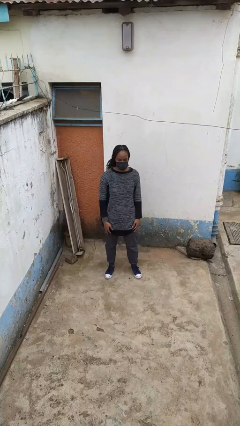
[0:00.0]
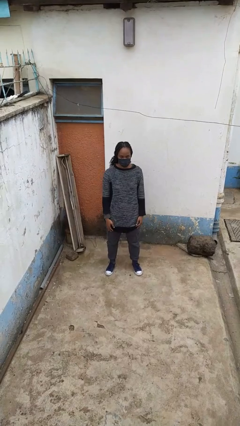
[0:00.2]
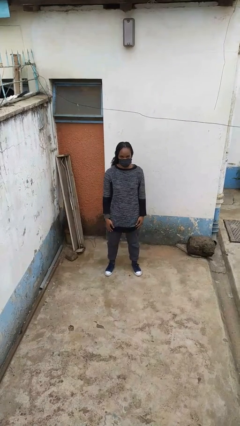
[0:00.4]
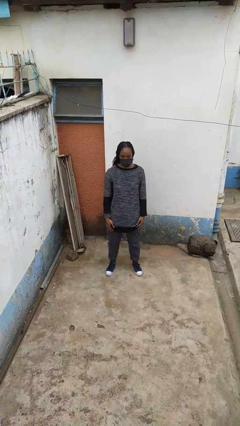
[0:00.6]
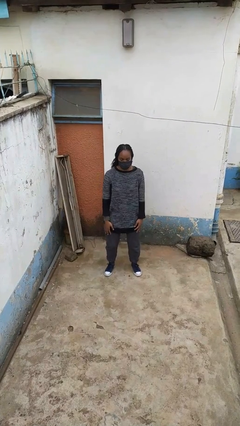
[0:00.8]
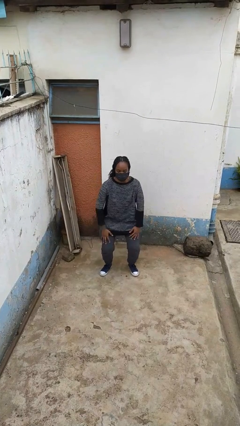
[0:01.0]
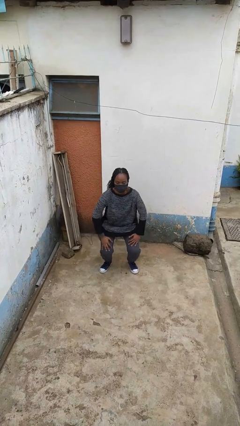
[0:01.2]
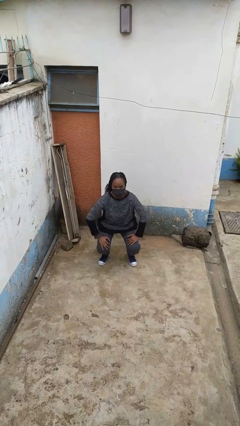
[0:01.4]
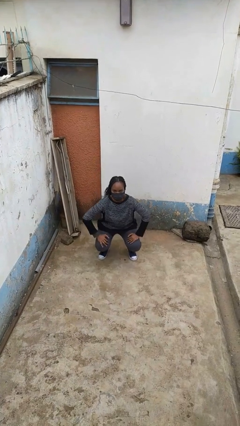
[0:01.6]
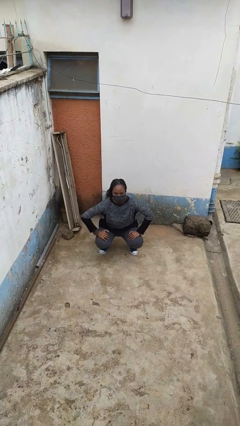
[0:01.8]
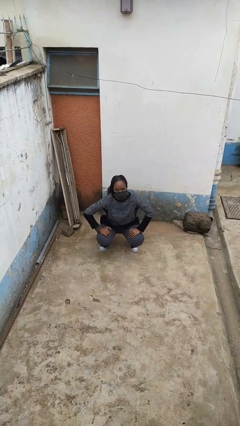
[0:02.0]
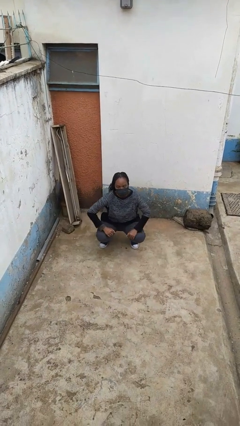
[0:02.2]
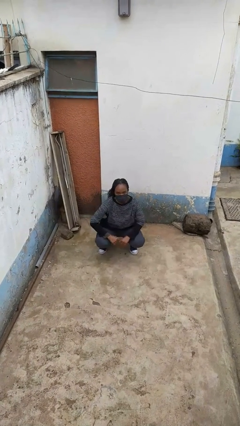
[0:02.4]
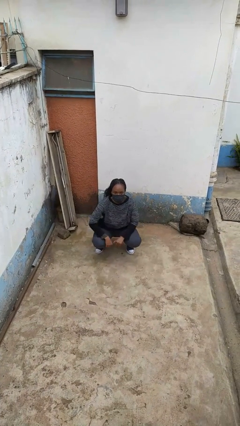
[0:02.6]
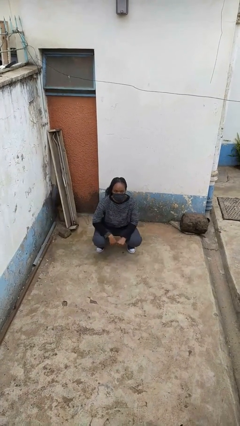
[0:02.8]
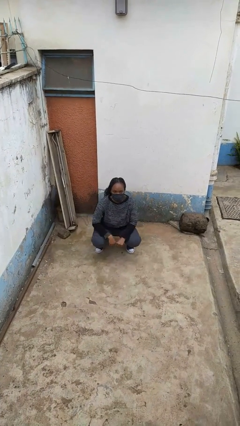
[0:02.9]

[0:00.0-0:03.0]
person squats

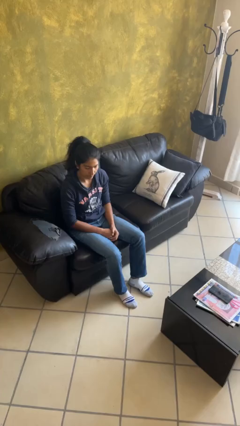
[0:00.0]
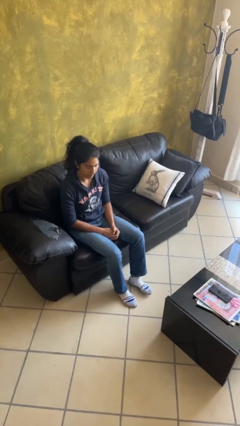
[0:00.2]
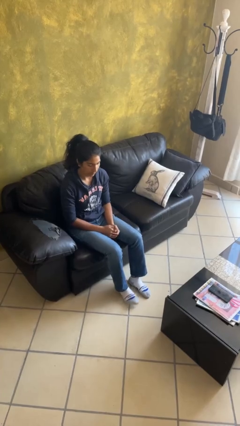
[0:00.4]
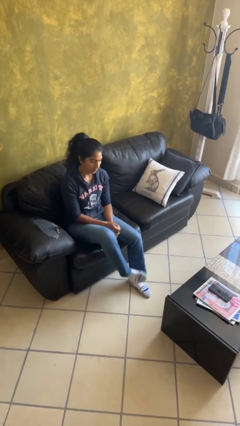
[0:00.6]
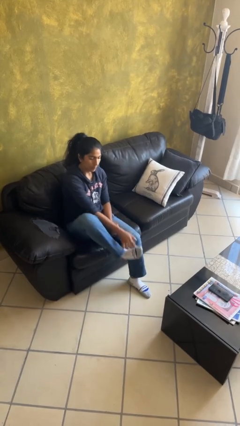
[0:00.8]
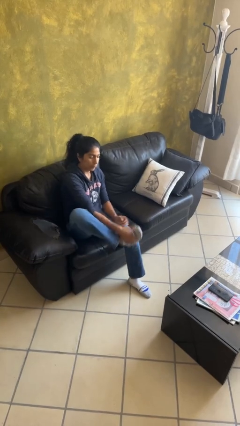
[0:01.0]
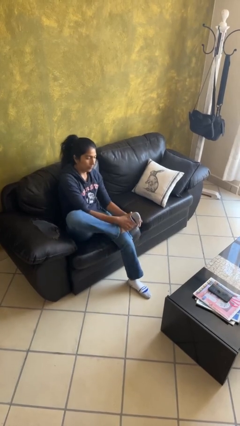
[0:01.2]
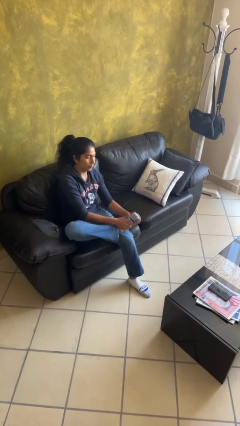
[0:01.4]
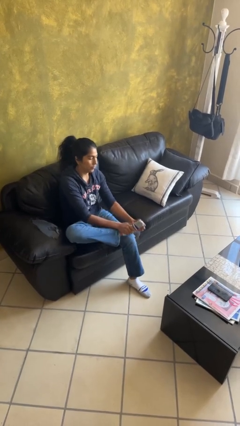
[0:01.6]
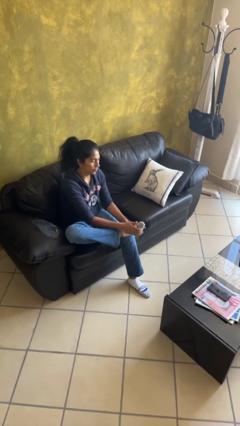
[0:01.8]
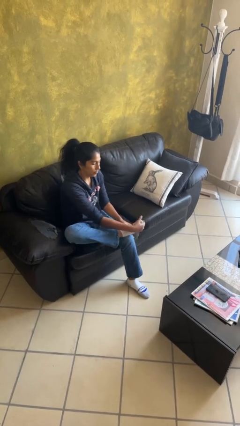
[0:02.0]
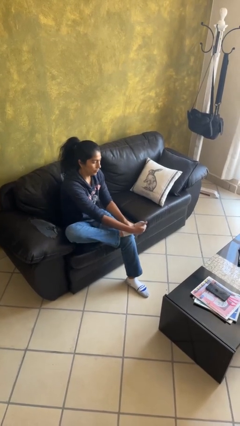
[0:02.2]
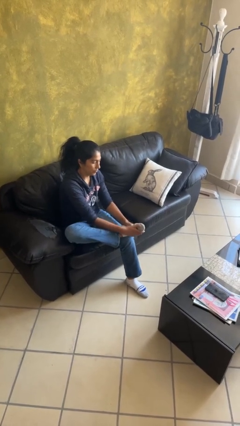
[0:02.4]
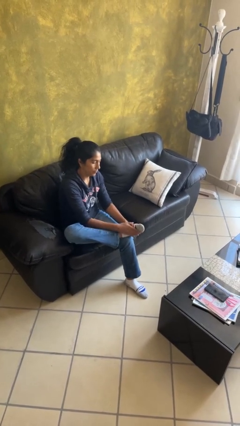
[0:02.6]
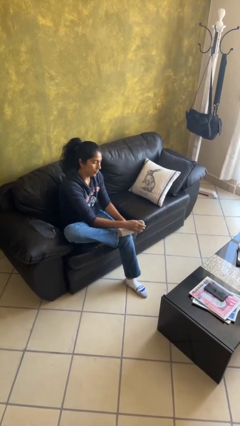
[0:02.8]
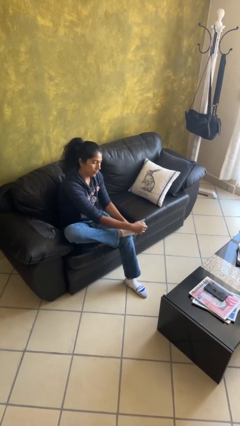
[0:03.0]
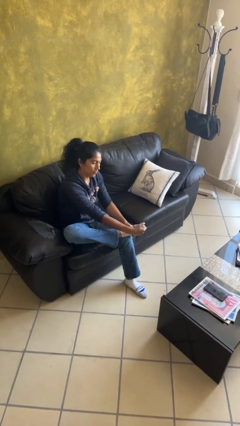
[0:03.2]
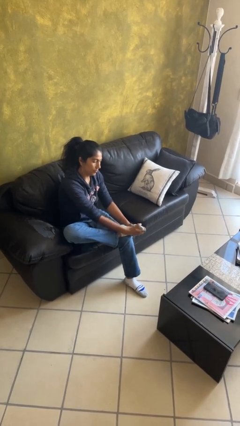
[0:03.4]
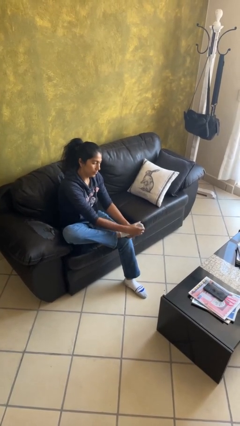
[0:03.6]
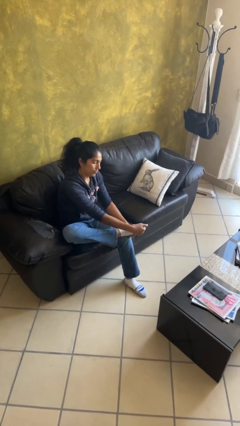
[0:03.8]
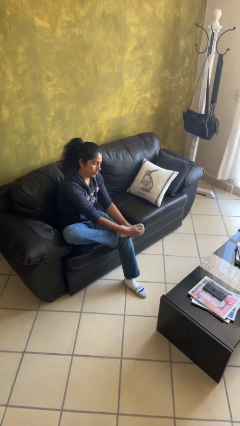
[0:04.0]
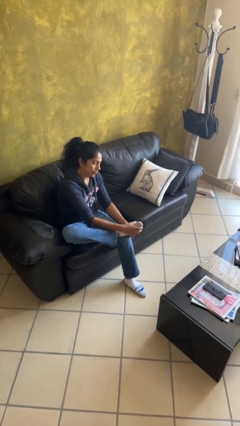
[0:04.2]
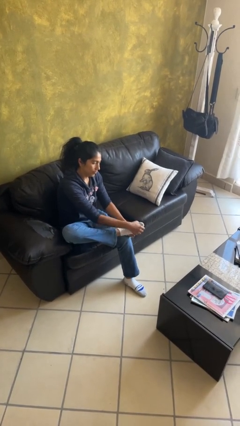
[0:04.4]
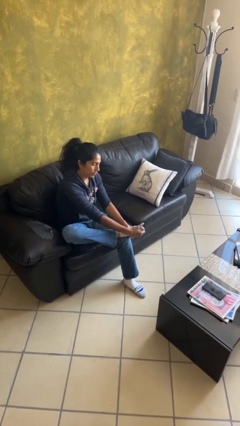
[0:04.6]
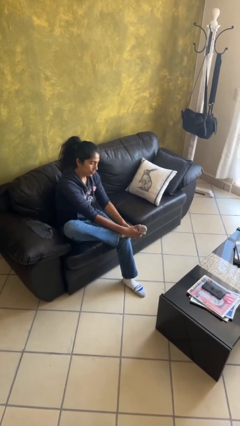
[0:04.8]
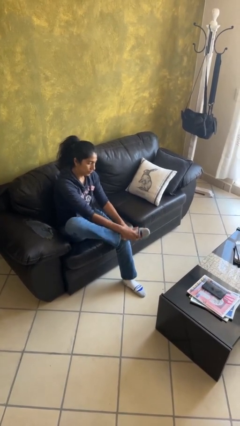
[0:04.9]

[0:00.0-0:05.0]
person rubs foot

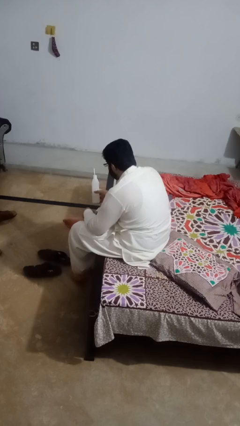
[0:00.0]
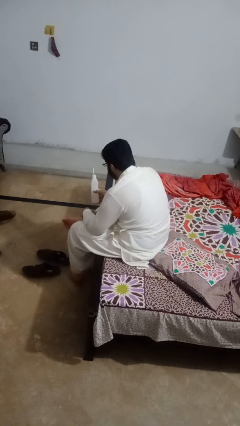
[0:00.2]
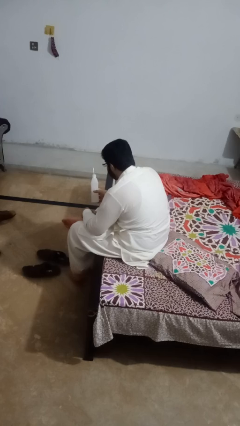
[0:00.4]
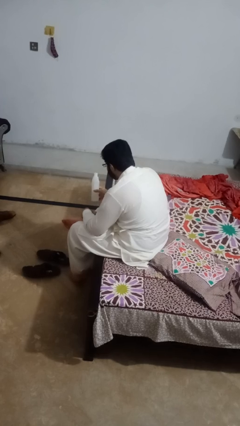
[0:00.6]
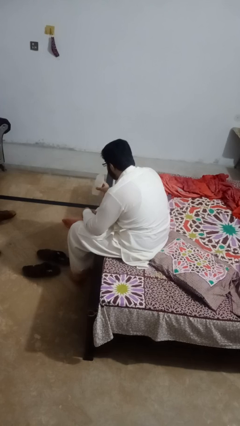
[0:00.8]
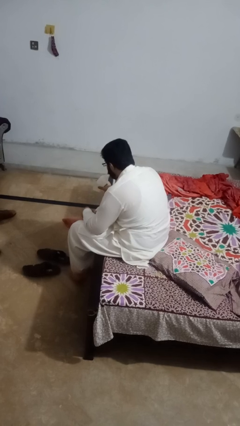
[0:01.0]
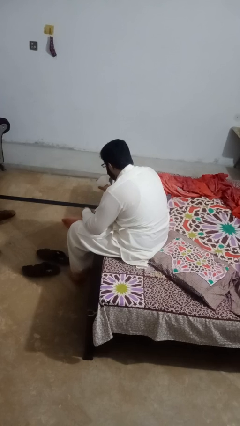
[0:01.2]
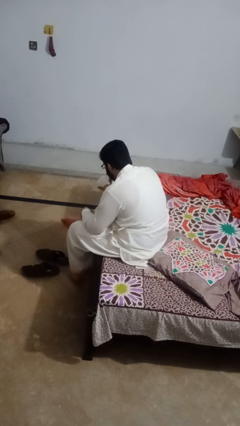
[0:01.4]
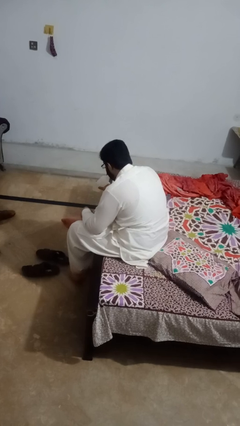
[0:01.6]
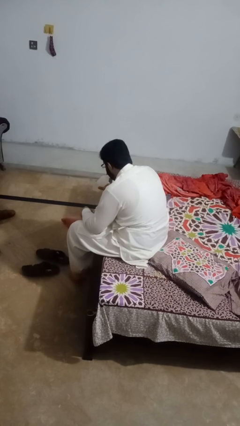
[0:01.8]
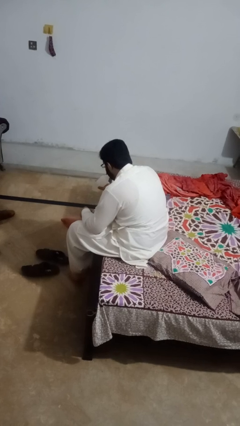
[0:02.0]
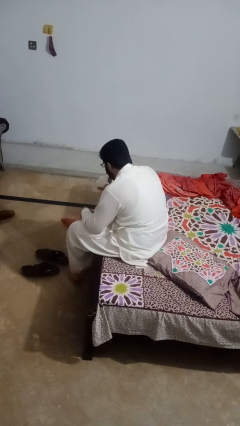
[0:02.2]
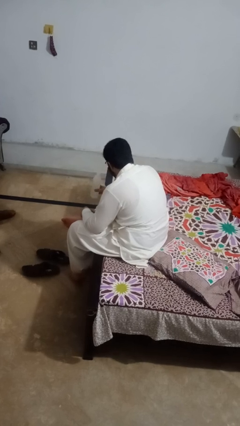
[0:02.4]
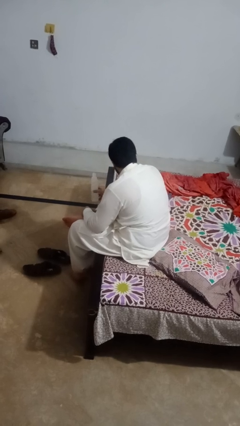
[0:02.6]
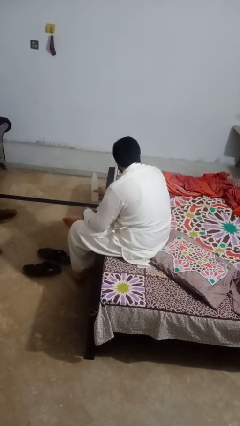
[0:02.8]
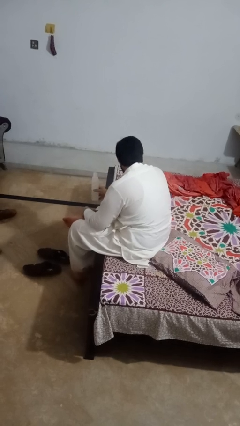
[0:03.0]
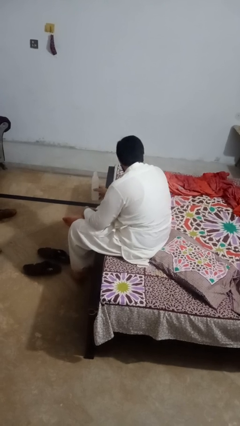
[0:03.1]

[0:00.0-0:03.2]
person drinks from straw

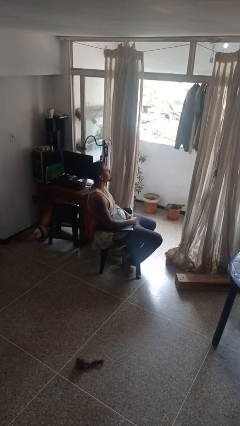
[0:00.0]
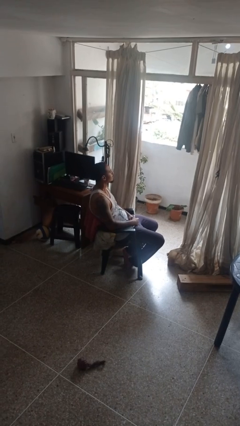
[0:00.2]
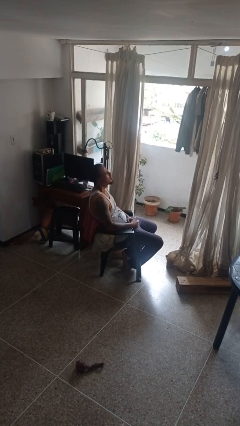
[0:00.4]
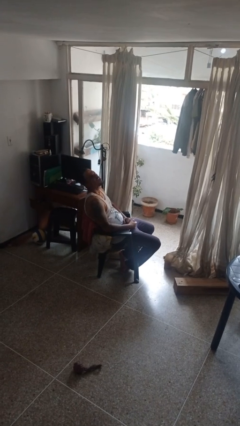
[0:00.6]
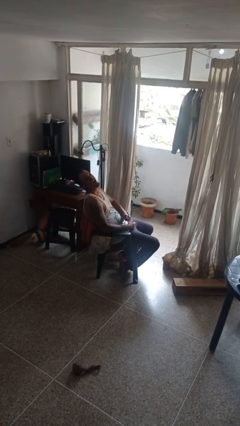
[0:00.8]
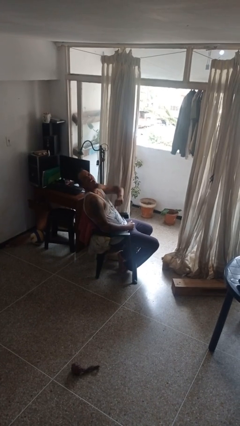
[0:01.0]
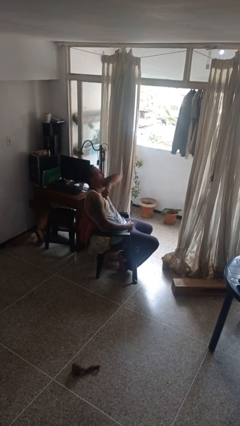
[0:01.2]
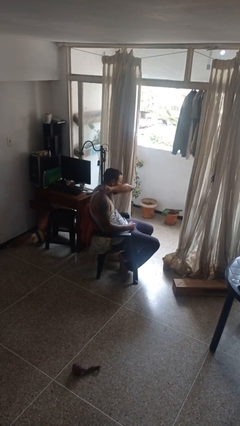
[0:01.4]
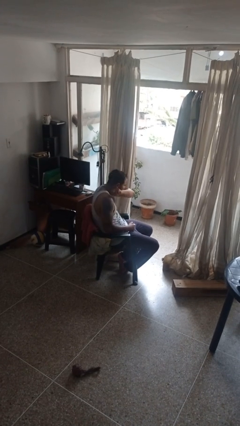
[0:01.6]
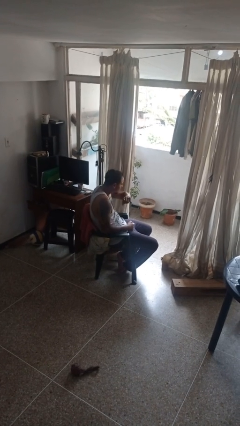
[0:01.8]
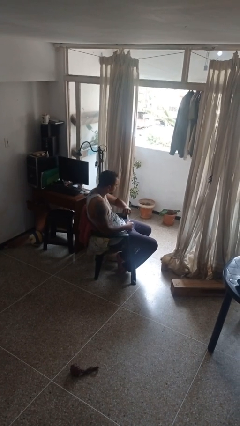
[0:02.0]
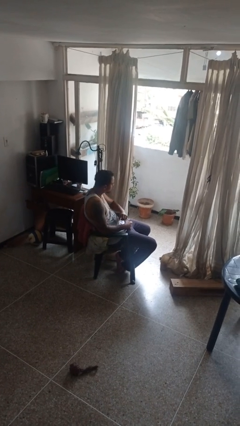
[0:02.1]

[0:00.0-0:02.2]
person sneezes into arm

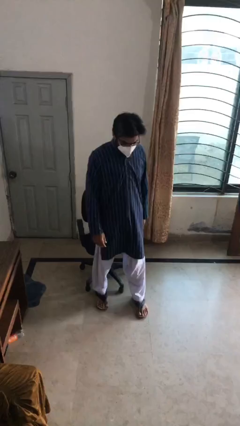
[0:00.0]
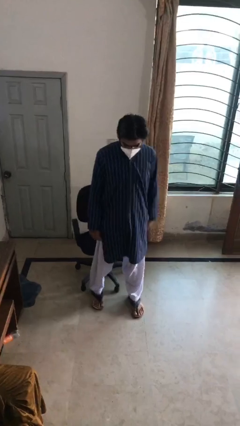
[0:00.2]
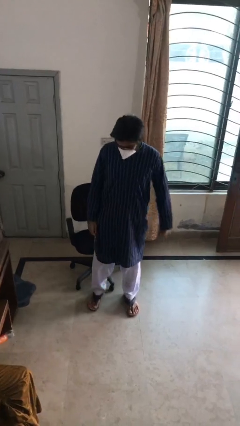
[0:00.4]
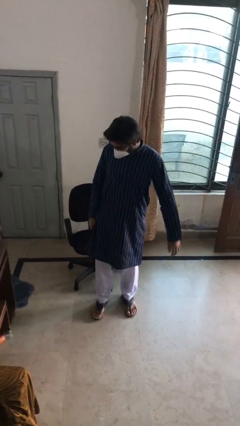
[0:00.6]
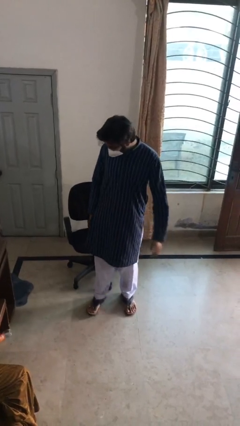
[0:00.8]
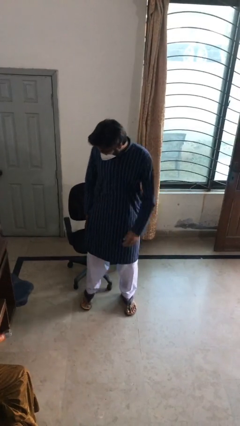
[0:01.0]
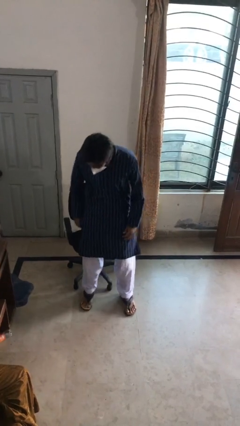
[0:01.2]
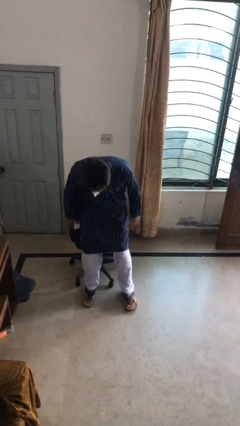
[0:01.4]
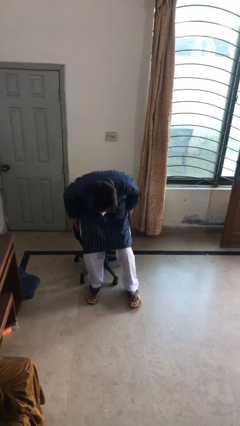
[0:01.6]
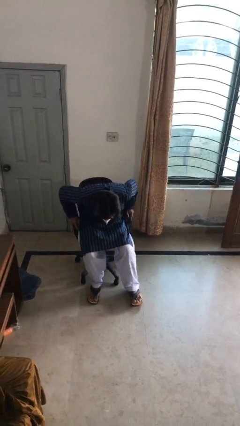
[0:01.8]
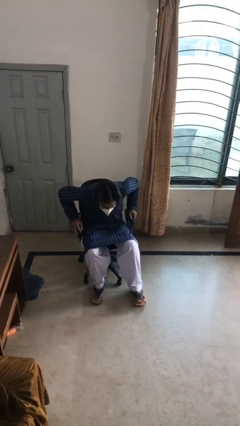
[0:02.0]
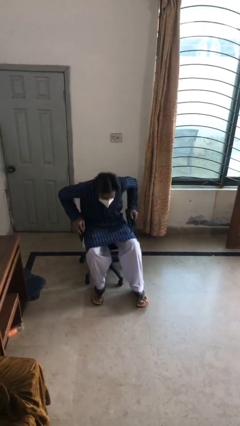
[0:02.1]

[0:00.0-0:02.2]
person sits down

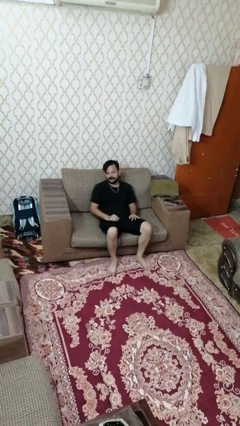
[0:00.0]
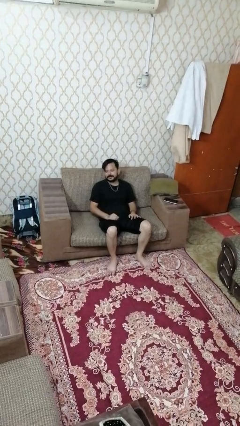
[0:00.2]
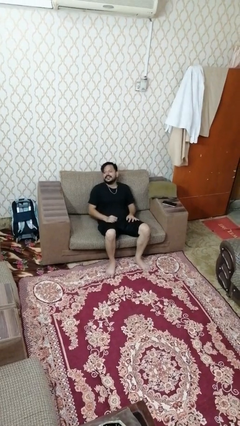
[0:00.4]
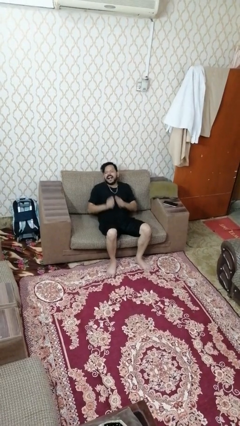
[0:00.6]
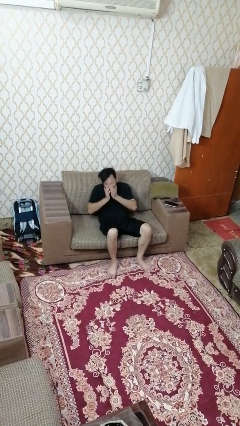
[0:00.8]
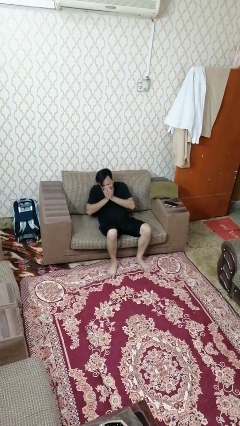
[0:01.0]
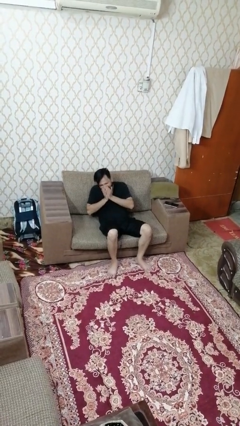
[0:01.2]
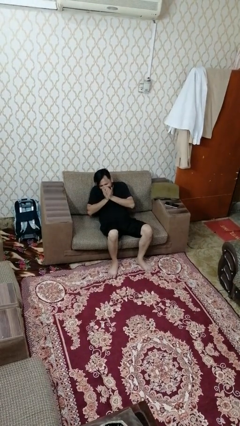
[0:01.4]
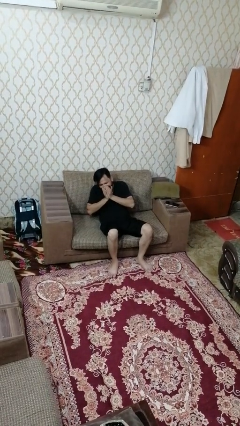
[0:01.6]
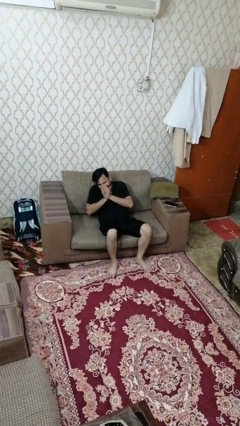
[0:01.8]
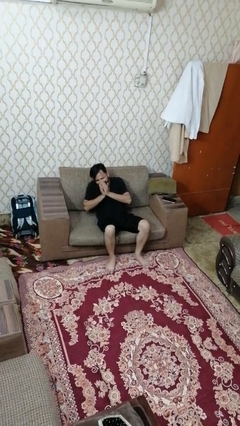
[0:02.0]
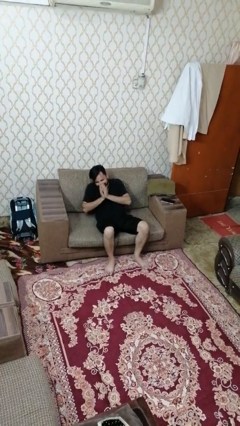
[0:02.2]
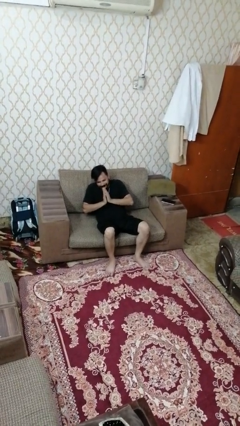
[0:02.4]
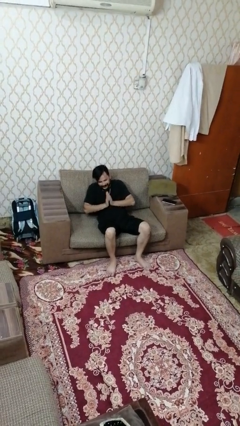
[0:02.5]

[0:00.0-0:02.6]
person sneezes into hand
